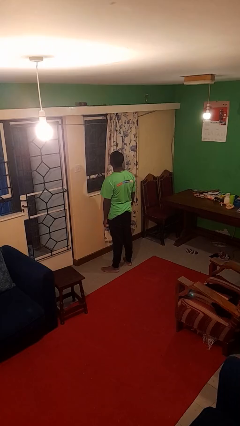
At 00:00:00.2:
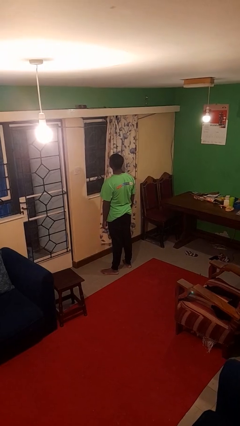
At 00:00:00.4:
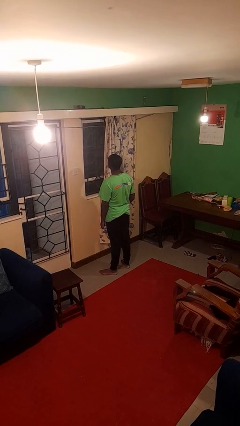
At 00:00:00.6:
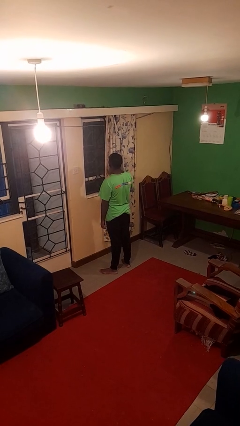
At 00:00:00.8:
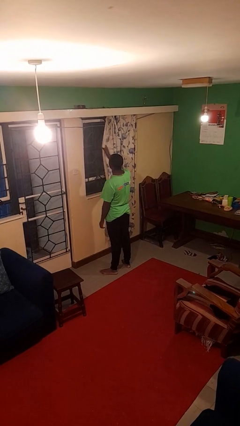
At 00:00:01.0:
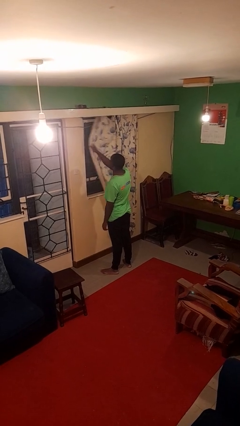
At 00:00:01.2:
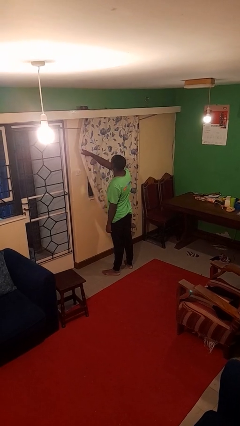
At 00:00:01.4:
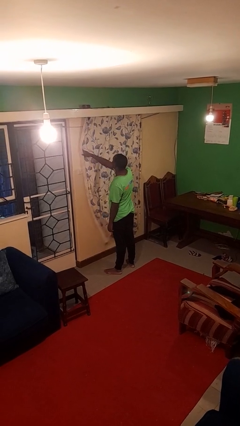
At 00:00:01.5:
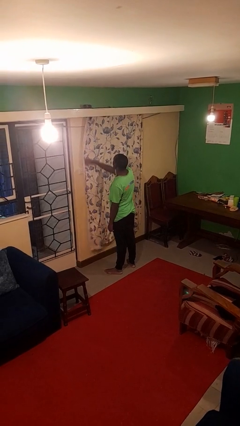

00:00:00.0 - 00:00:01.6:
person closes curtains

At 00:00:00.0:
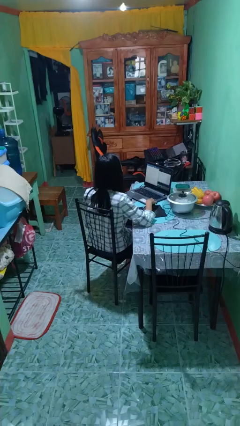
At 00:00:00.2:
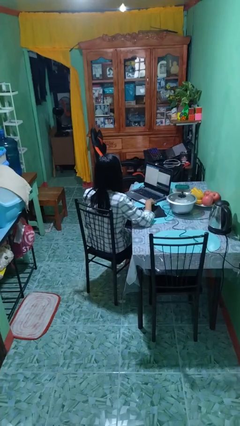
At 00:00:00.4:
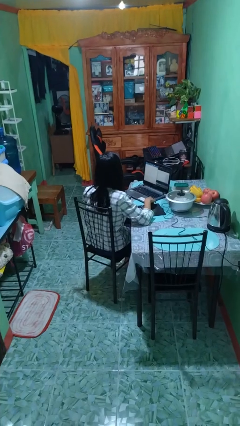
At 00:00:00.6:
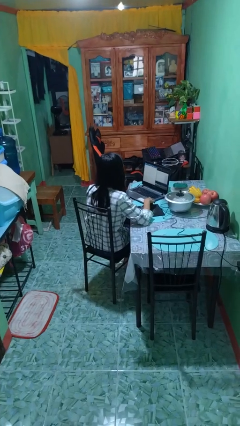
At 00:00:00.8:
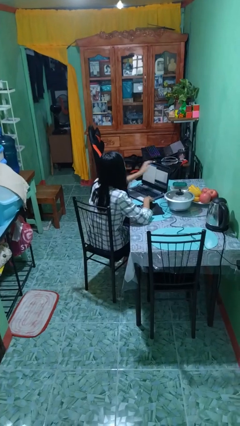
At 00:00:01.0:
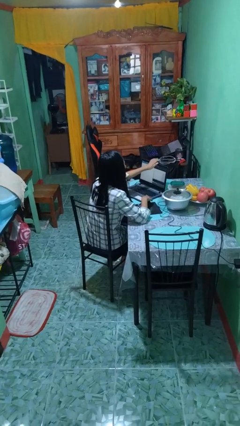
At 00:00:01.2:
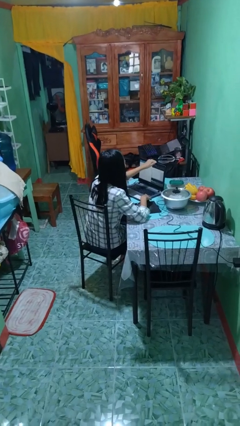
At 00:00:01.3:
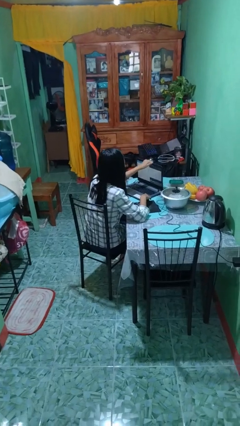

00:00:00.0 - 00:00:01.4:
person closes laptop

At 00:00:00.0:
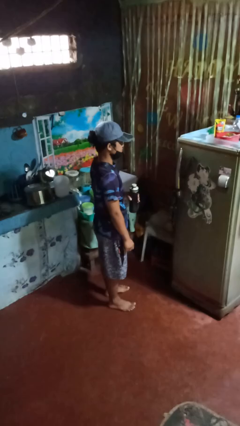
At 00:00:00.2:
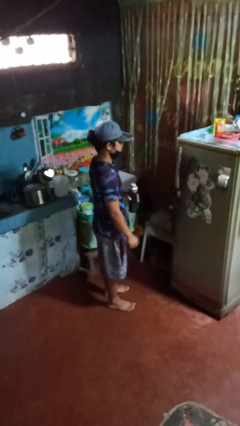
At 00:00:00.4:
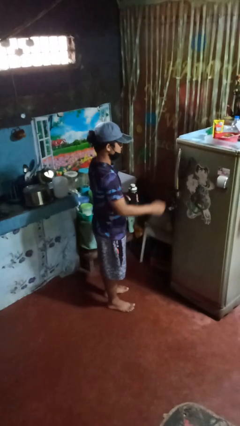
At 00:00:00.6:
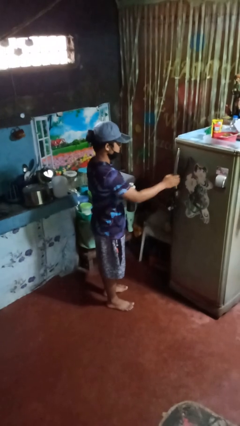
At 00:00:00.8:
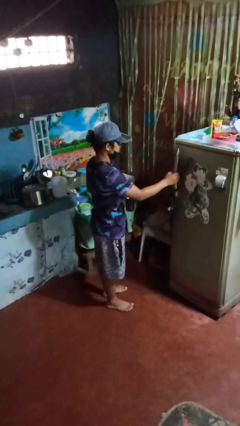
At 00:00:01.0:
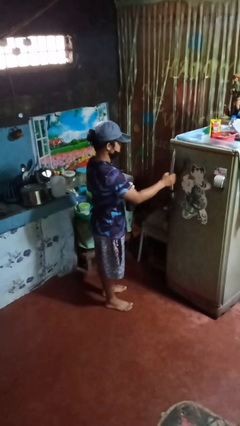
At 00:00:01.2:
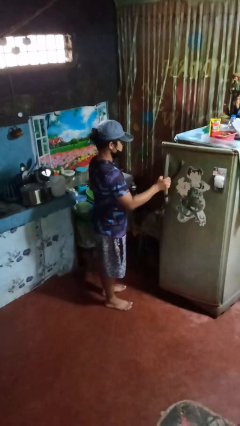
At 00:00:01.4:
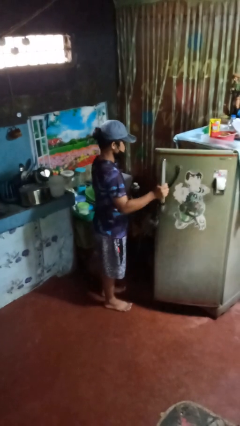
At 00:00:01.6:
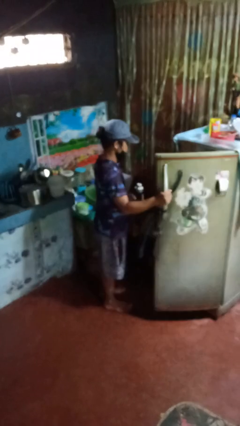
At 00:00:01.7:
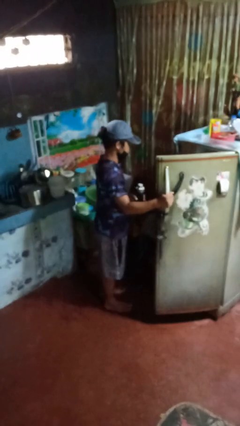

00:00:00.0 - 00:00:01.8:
person opens refrigerator

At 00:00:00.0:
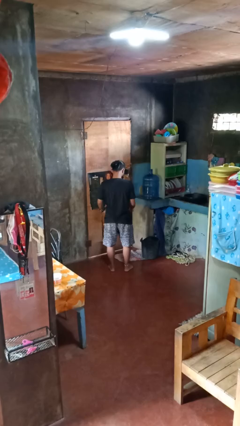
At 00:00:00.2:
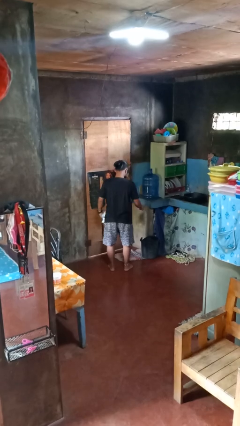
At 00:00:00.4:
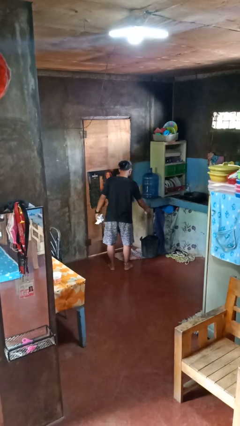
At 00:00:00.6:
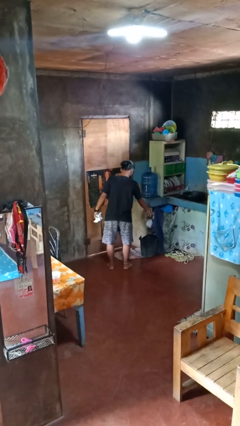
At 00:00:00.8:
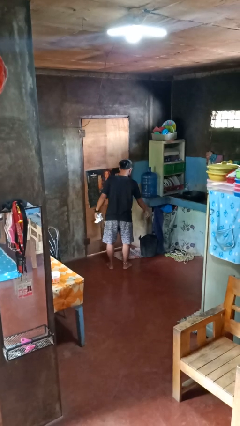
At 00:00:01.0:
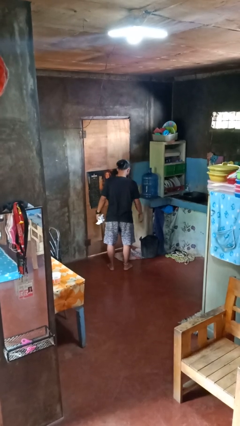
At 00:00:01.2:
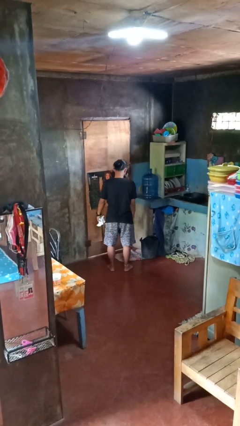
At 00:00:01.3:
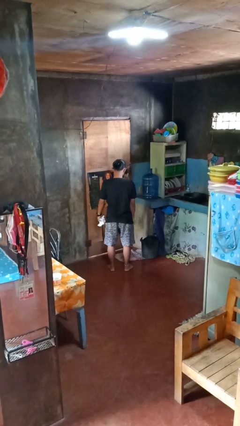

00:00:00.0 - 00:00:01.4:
person discards trash

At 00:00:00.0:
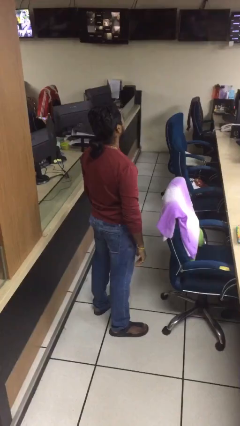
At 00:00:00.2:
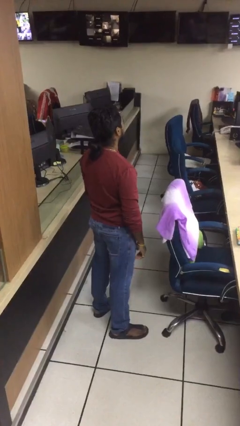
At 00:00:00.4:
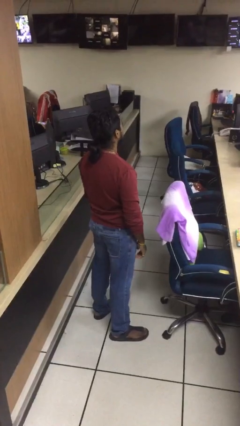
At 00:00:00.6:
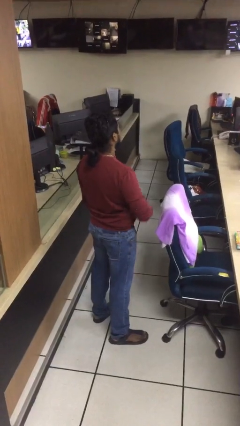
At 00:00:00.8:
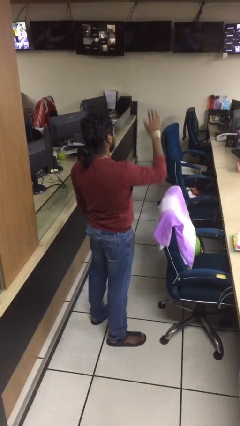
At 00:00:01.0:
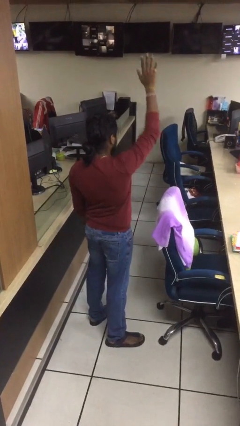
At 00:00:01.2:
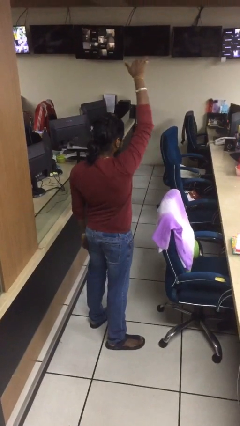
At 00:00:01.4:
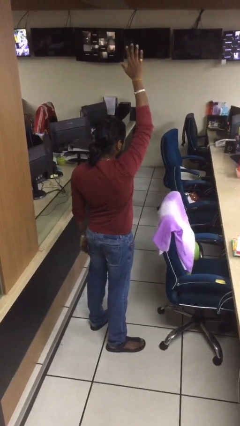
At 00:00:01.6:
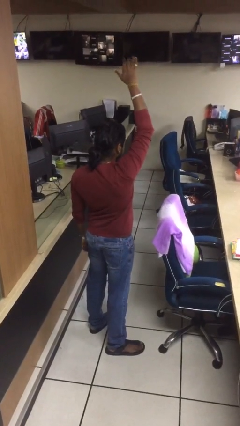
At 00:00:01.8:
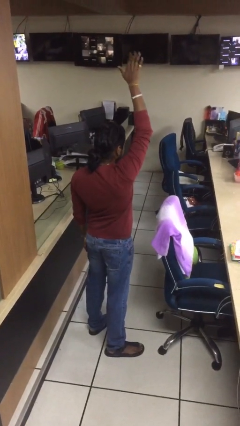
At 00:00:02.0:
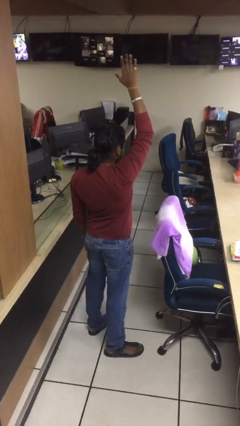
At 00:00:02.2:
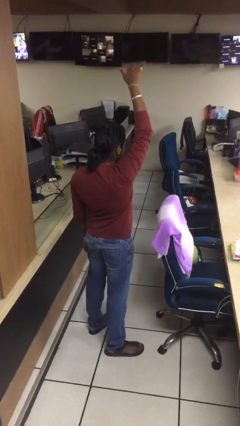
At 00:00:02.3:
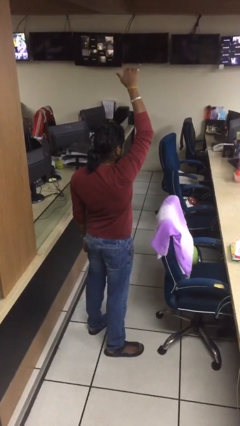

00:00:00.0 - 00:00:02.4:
person gestures come here

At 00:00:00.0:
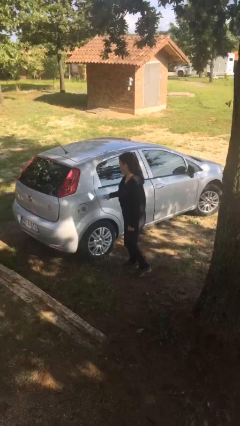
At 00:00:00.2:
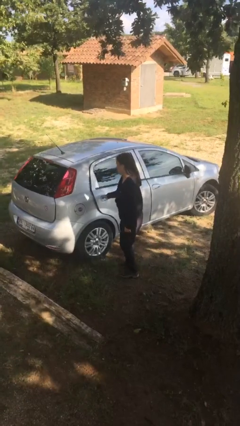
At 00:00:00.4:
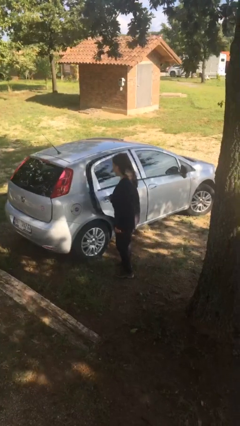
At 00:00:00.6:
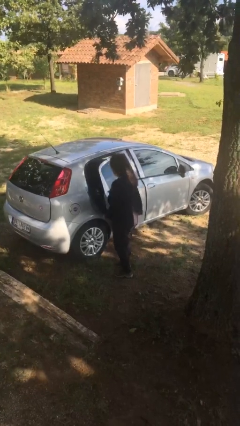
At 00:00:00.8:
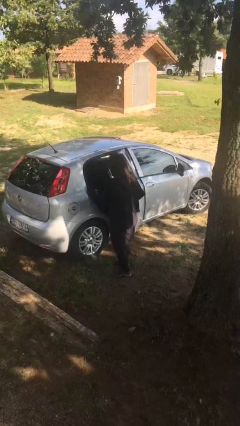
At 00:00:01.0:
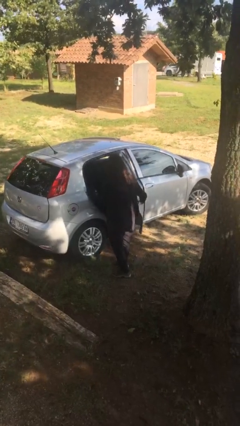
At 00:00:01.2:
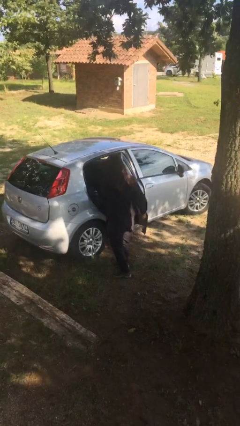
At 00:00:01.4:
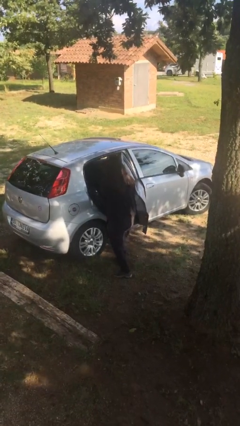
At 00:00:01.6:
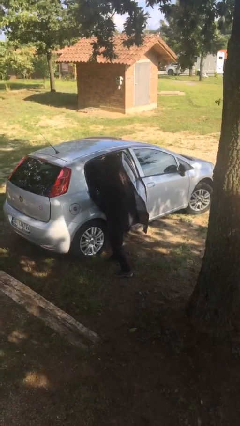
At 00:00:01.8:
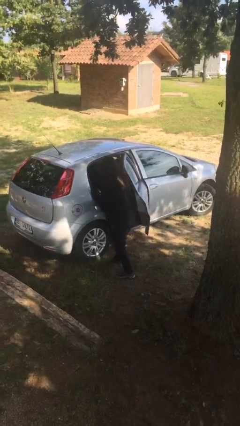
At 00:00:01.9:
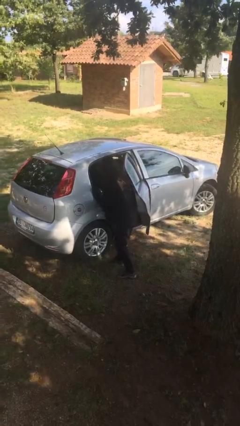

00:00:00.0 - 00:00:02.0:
person opens car door

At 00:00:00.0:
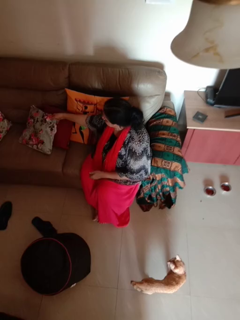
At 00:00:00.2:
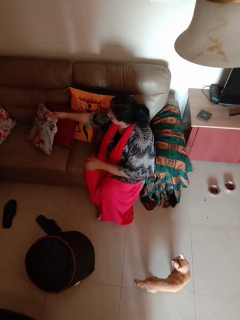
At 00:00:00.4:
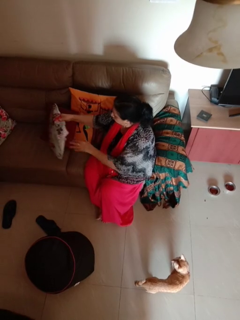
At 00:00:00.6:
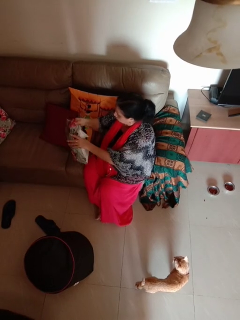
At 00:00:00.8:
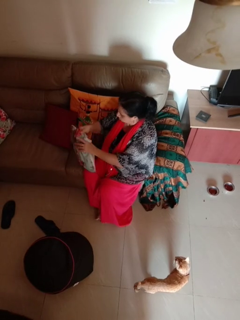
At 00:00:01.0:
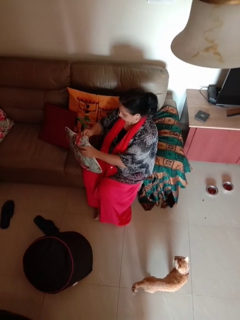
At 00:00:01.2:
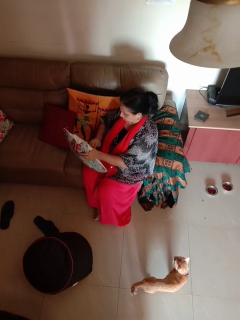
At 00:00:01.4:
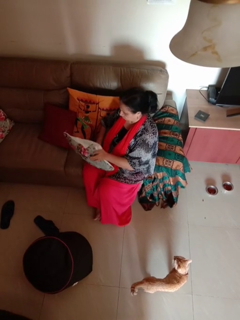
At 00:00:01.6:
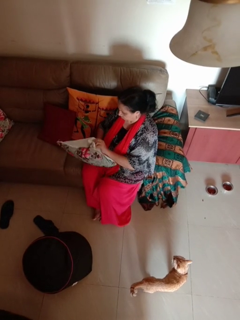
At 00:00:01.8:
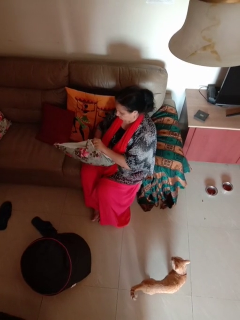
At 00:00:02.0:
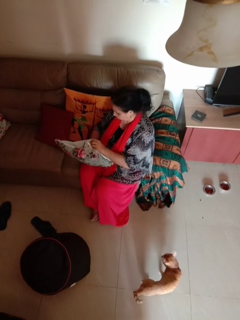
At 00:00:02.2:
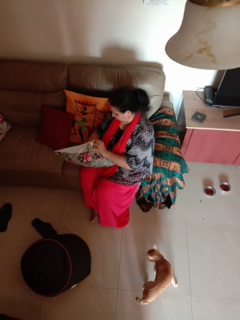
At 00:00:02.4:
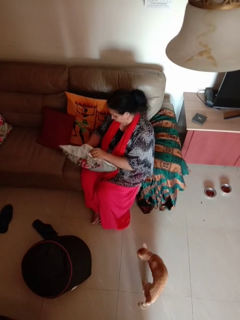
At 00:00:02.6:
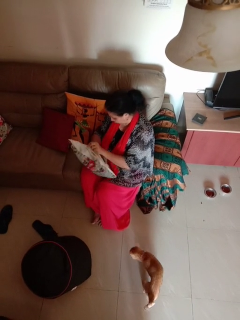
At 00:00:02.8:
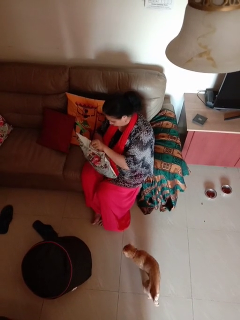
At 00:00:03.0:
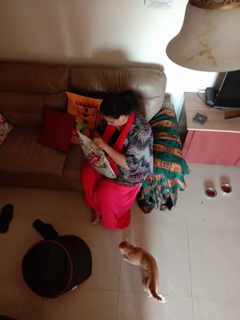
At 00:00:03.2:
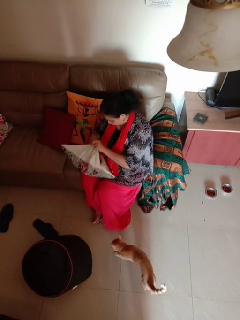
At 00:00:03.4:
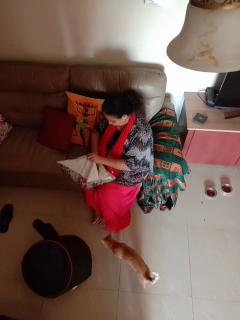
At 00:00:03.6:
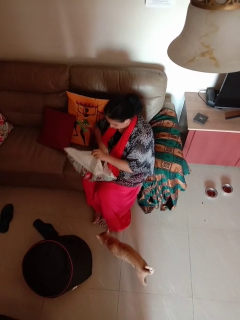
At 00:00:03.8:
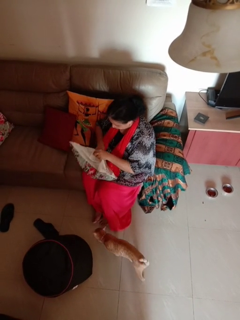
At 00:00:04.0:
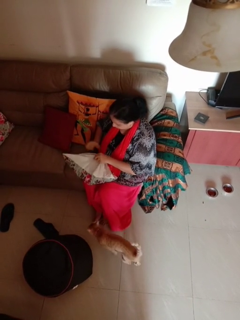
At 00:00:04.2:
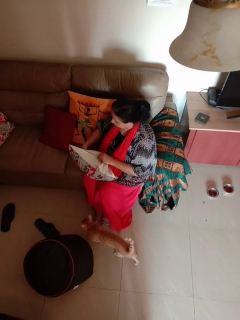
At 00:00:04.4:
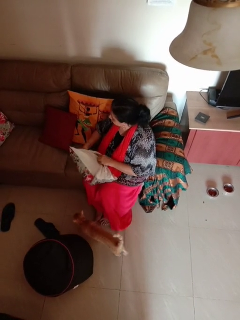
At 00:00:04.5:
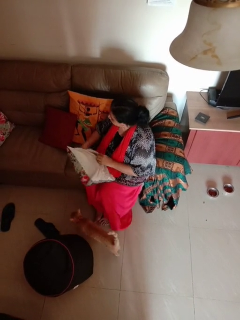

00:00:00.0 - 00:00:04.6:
person searches in couch

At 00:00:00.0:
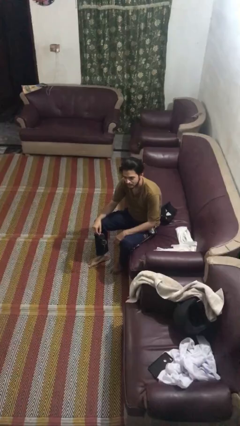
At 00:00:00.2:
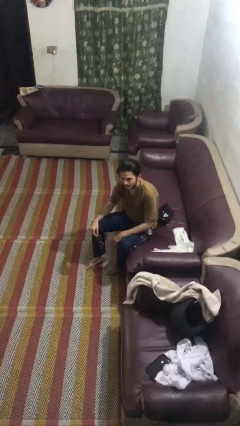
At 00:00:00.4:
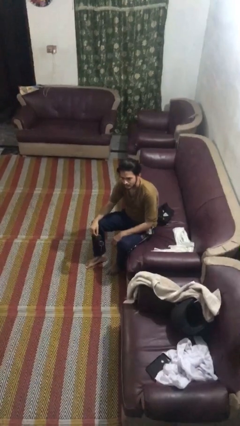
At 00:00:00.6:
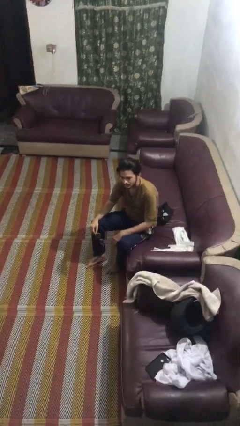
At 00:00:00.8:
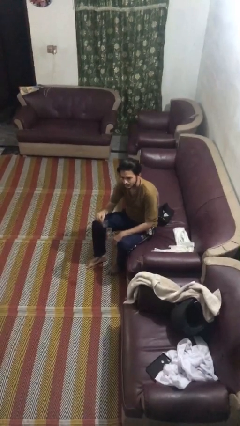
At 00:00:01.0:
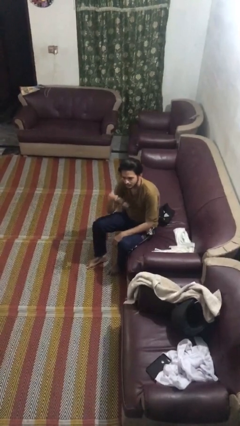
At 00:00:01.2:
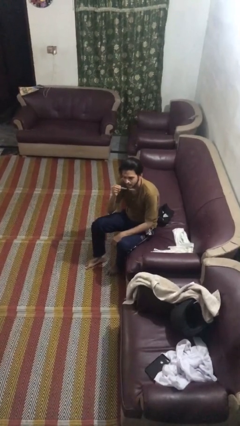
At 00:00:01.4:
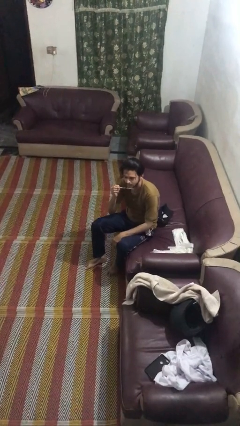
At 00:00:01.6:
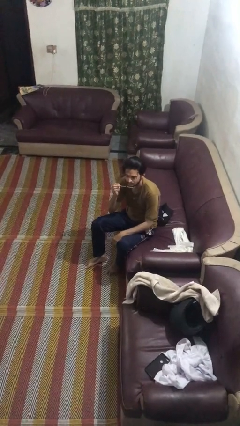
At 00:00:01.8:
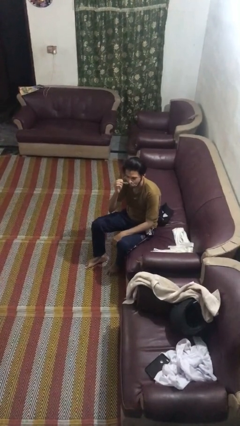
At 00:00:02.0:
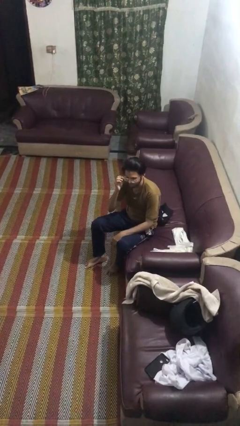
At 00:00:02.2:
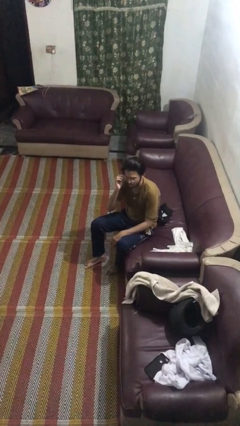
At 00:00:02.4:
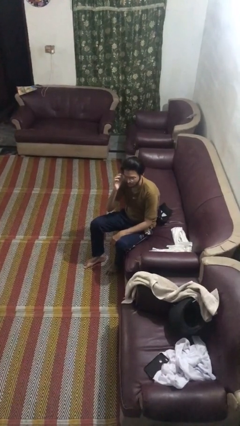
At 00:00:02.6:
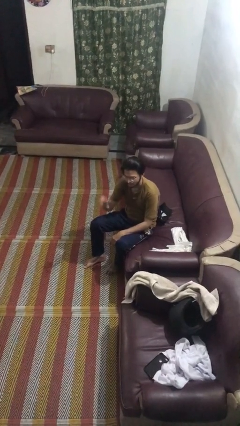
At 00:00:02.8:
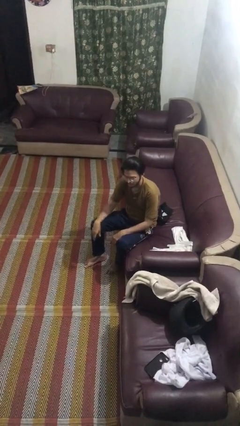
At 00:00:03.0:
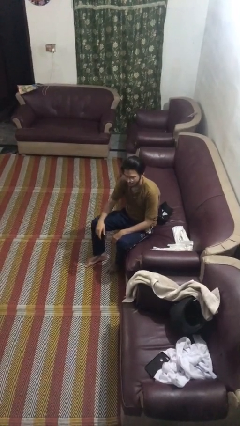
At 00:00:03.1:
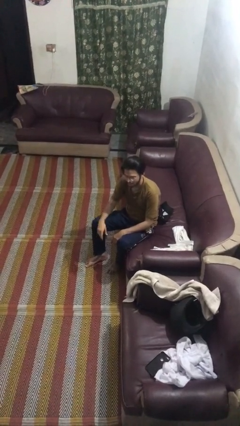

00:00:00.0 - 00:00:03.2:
person puts on glasses
